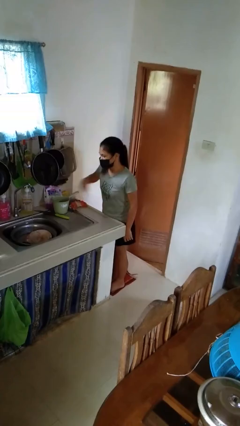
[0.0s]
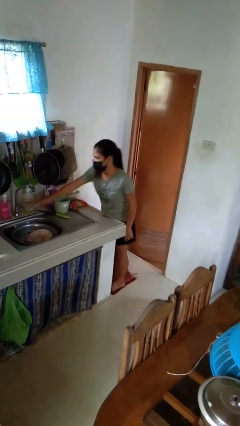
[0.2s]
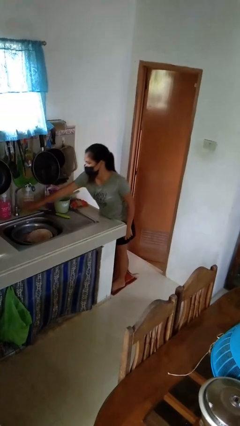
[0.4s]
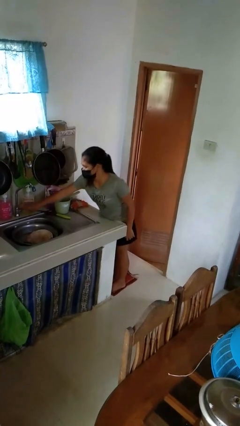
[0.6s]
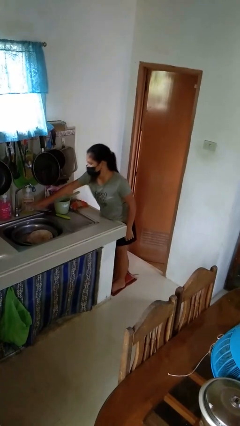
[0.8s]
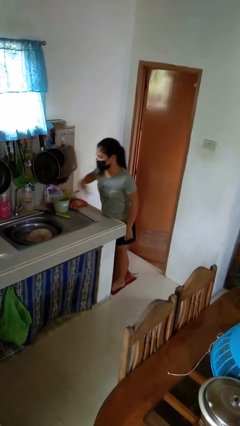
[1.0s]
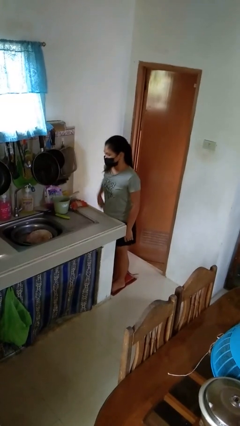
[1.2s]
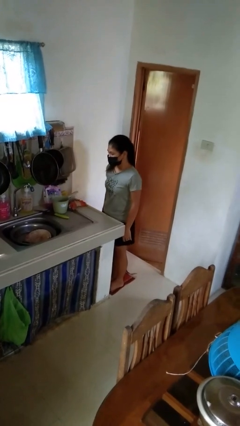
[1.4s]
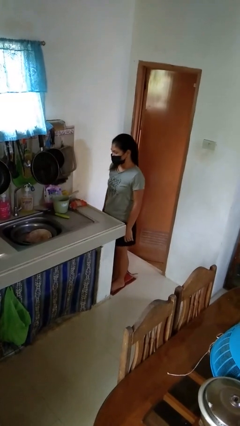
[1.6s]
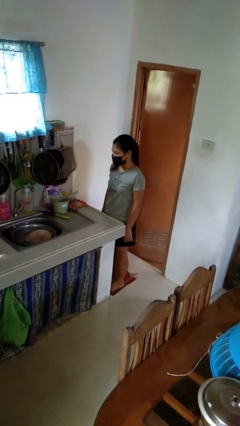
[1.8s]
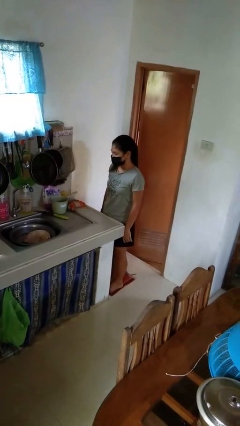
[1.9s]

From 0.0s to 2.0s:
person turns off faucet

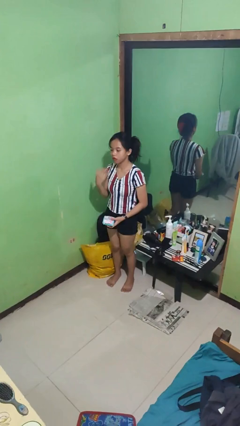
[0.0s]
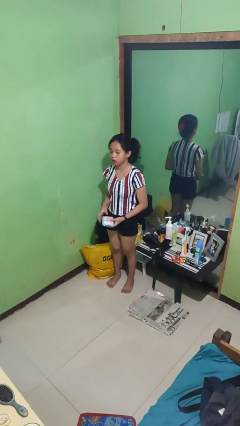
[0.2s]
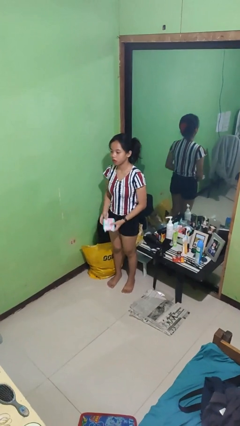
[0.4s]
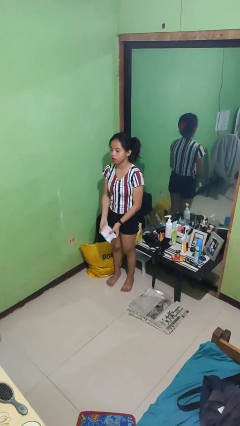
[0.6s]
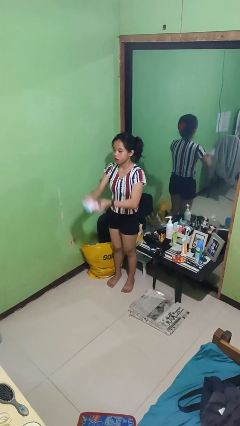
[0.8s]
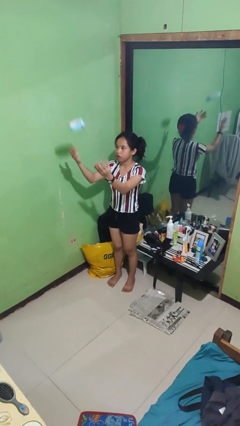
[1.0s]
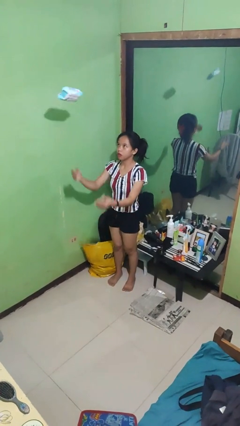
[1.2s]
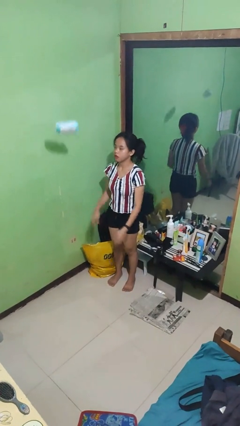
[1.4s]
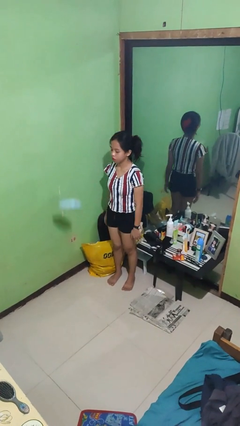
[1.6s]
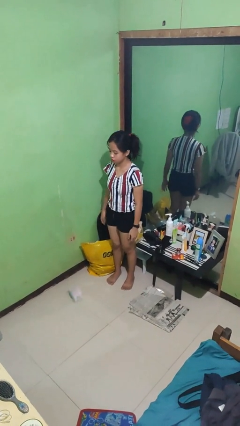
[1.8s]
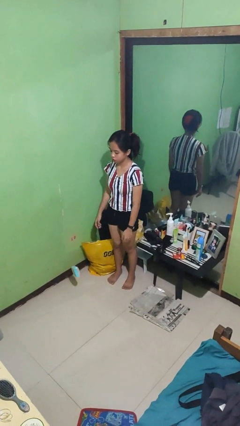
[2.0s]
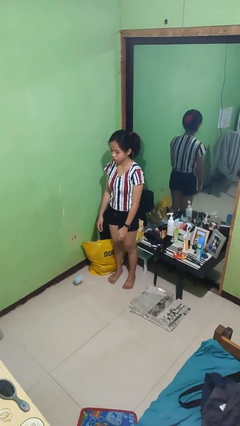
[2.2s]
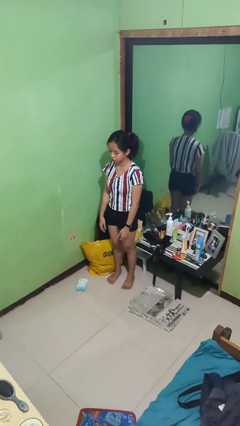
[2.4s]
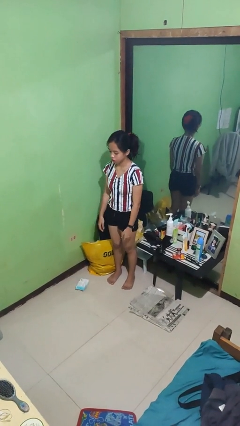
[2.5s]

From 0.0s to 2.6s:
person throws object into air

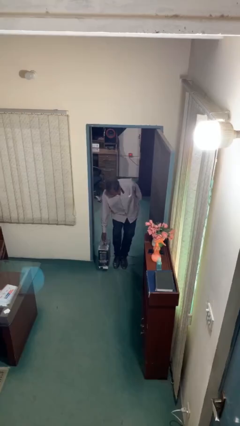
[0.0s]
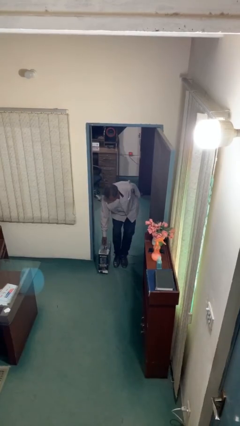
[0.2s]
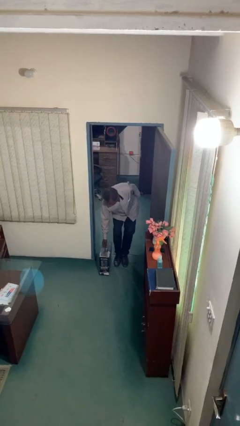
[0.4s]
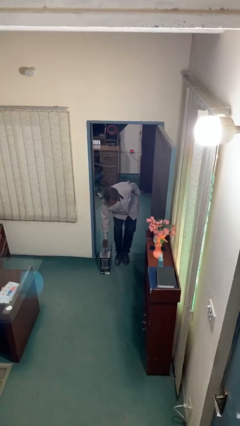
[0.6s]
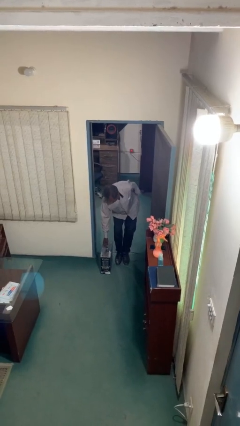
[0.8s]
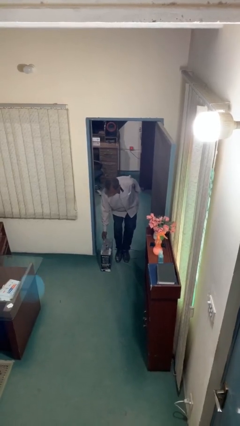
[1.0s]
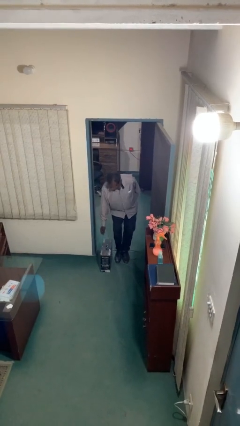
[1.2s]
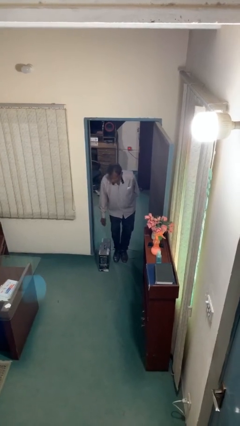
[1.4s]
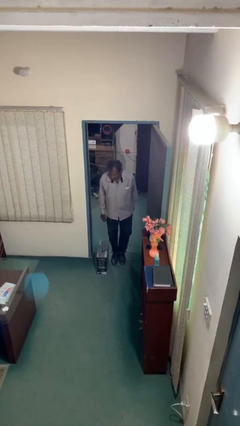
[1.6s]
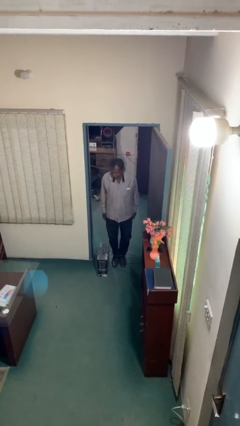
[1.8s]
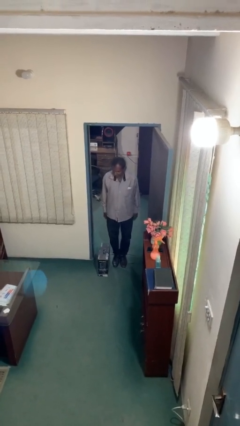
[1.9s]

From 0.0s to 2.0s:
person puts down object on floor

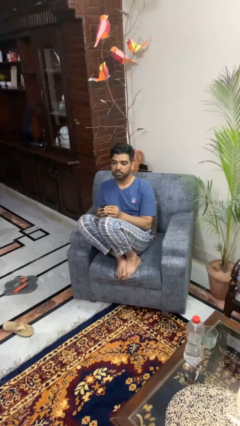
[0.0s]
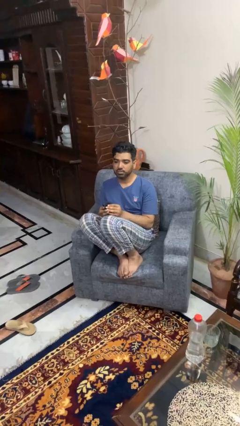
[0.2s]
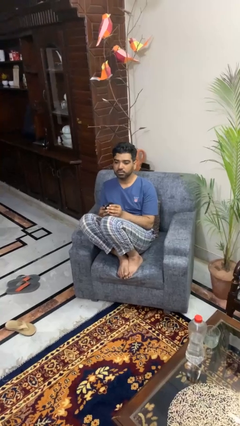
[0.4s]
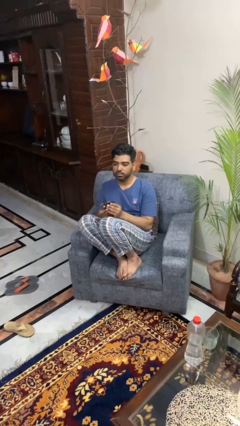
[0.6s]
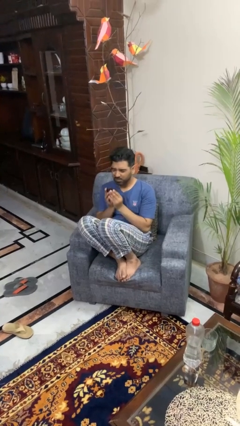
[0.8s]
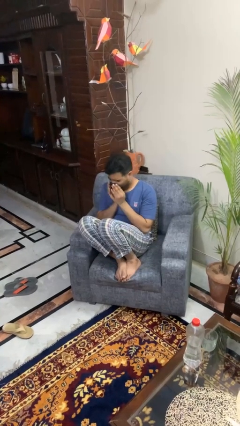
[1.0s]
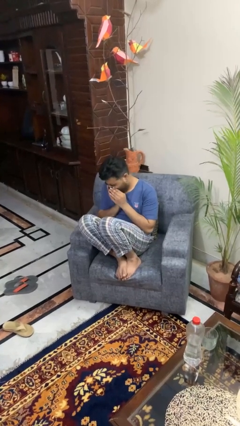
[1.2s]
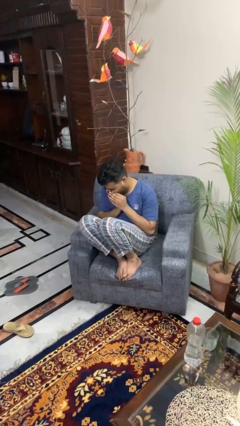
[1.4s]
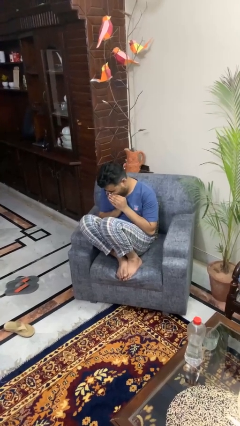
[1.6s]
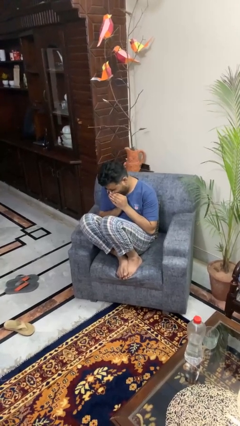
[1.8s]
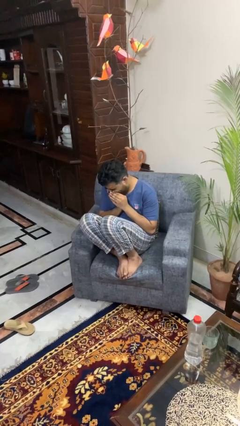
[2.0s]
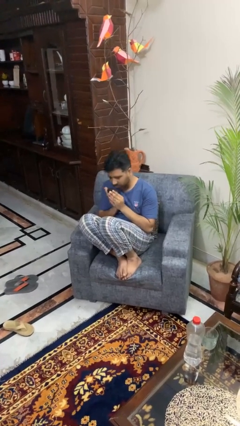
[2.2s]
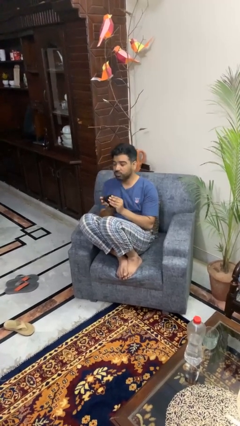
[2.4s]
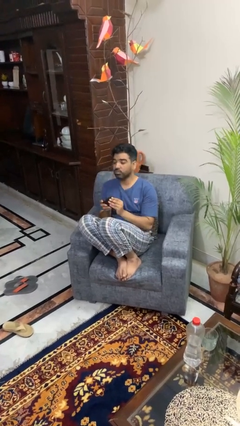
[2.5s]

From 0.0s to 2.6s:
person blows nose

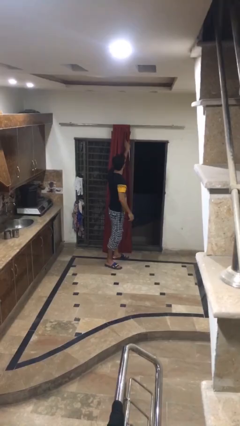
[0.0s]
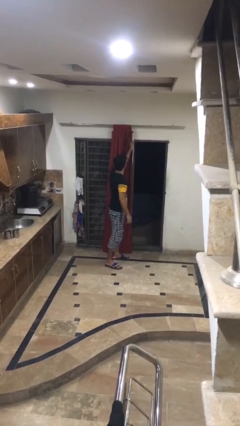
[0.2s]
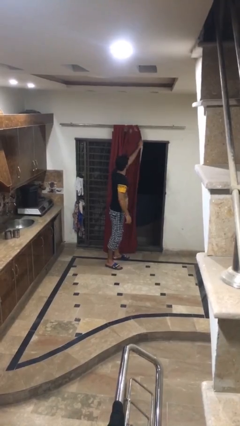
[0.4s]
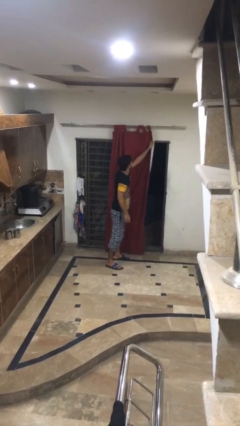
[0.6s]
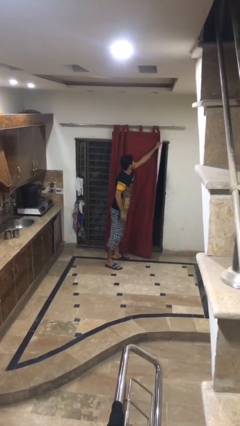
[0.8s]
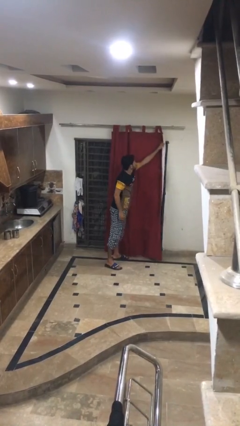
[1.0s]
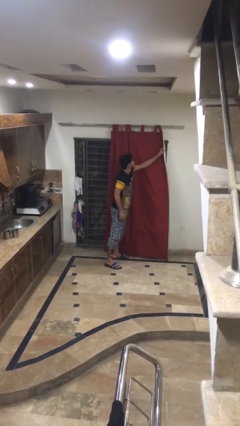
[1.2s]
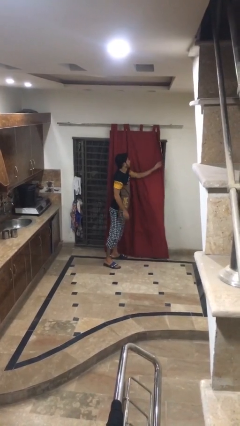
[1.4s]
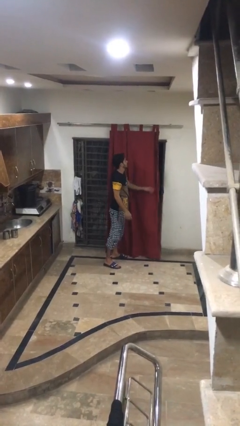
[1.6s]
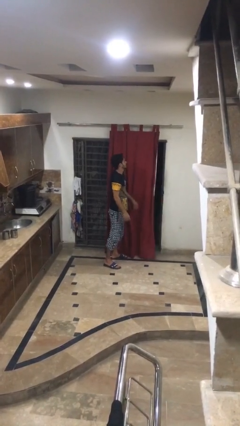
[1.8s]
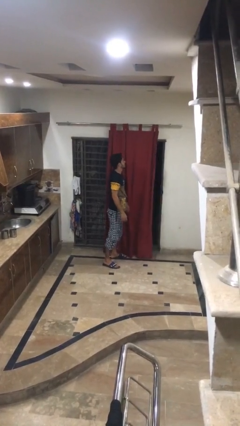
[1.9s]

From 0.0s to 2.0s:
person closes curtains

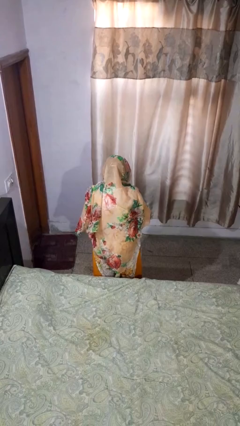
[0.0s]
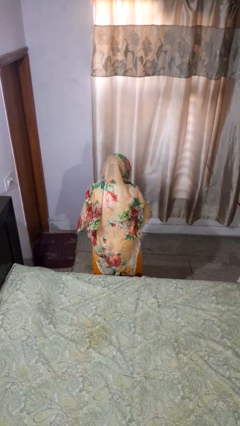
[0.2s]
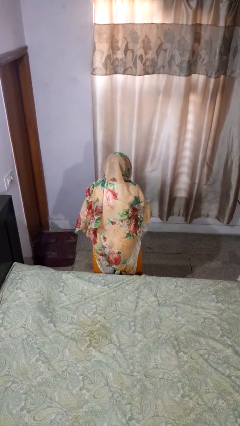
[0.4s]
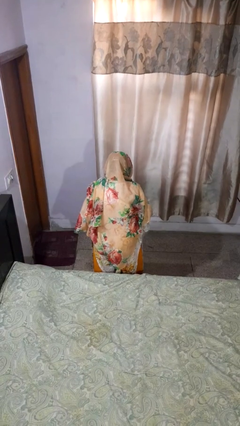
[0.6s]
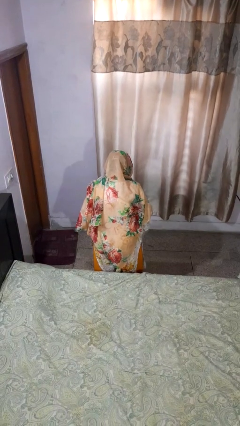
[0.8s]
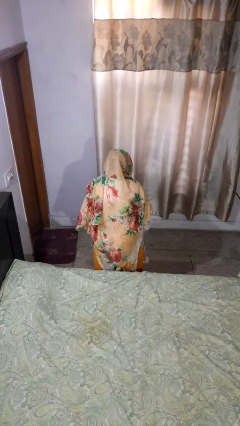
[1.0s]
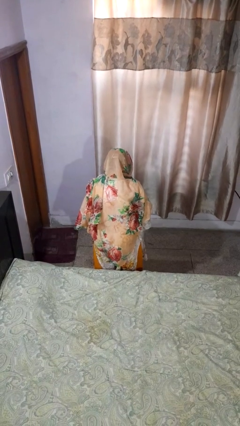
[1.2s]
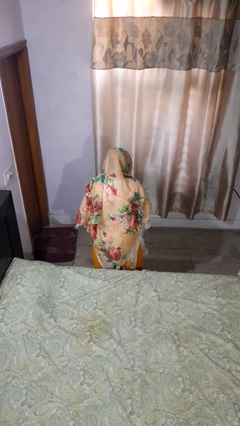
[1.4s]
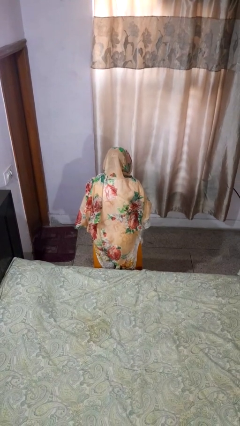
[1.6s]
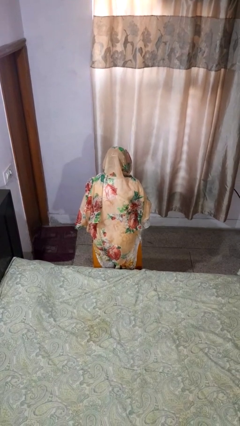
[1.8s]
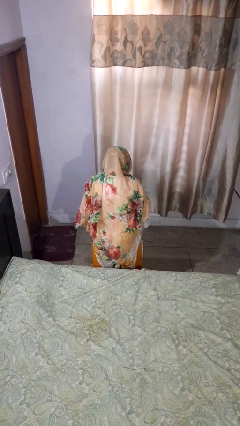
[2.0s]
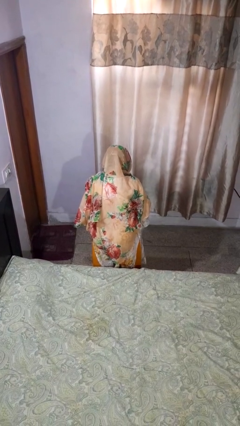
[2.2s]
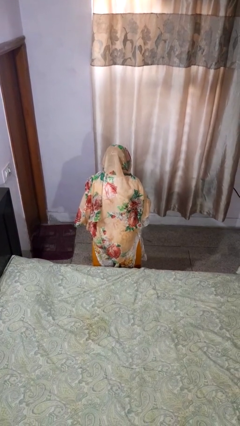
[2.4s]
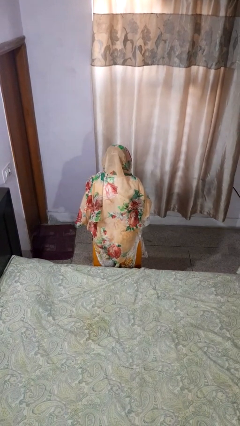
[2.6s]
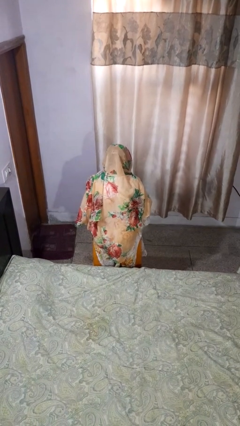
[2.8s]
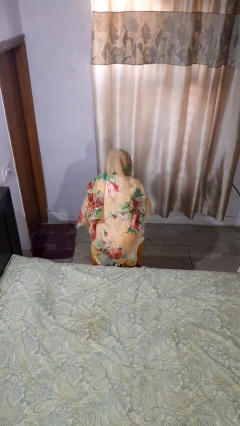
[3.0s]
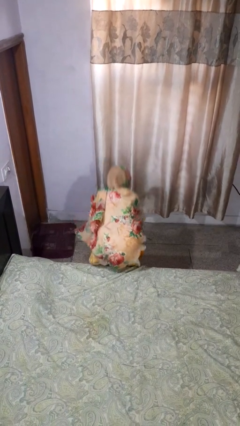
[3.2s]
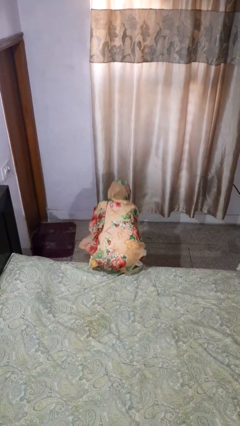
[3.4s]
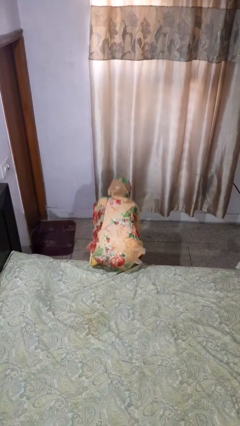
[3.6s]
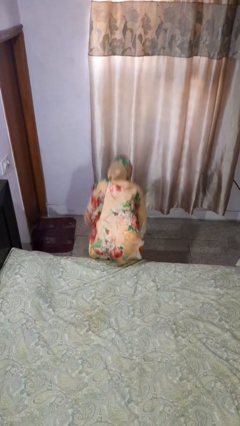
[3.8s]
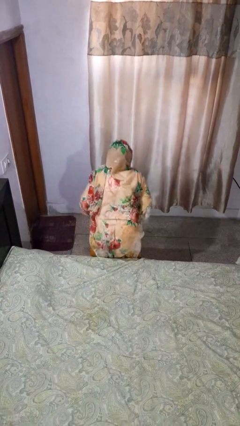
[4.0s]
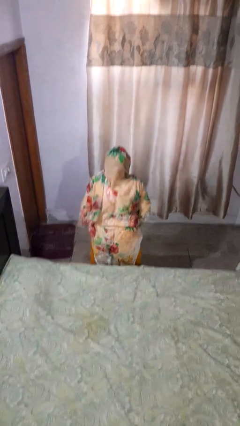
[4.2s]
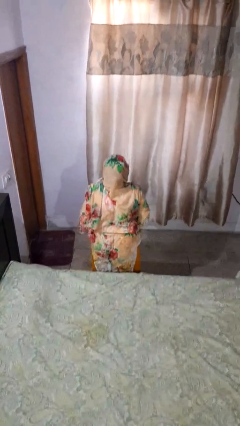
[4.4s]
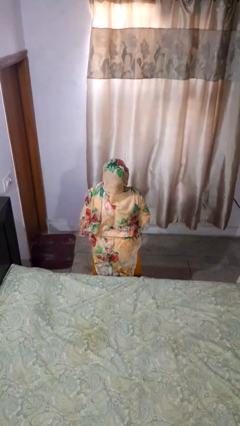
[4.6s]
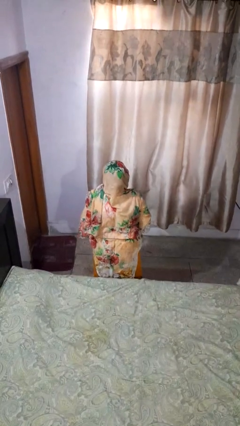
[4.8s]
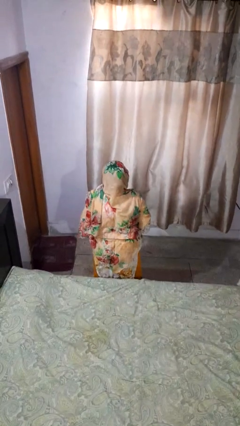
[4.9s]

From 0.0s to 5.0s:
person picks up object from floor

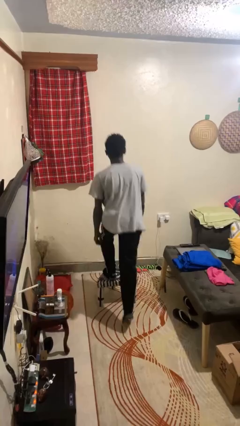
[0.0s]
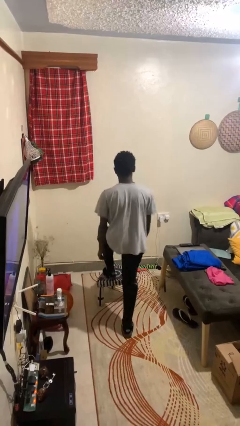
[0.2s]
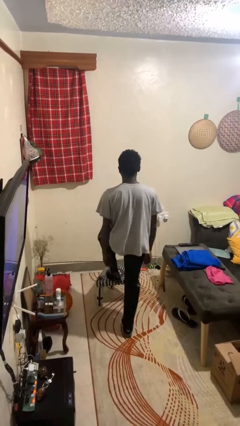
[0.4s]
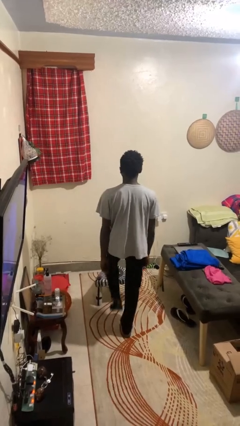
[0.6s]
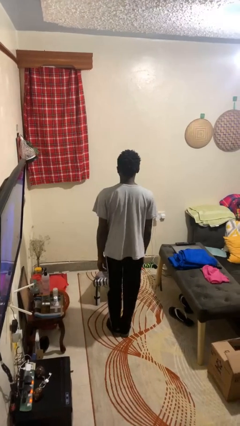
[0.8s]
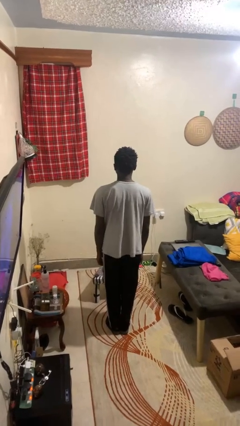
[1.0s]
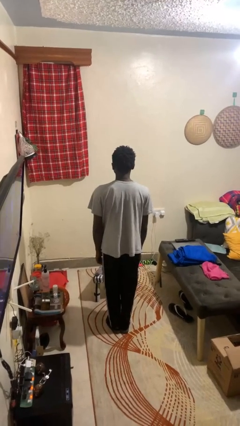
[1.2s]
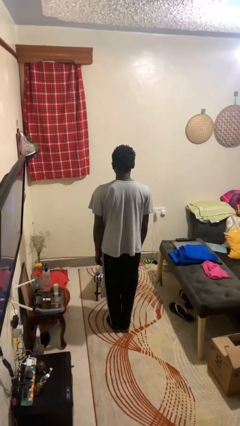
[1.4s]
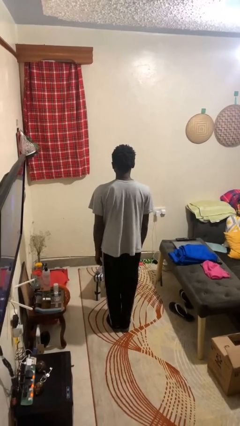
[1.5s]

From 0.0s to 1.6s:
person climbs on chair
